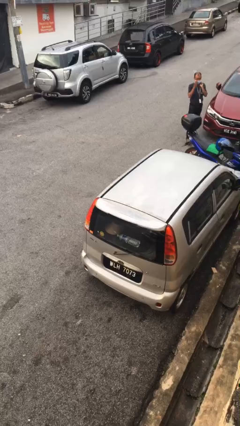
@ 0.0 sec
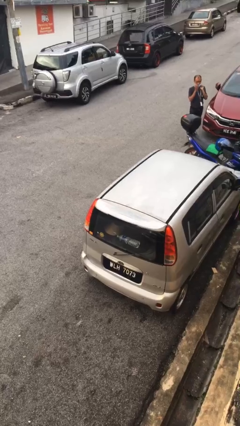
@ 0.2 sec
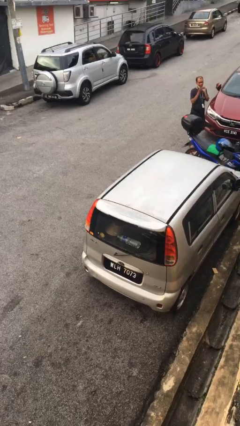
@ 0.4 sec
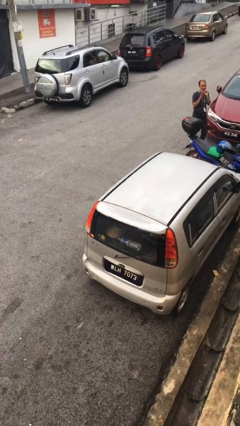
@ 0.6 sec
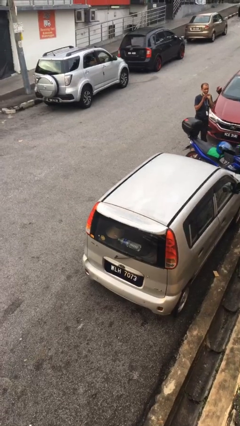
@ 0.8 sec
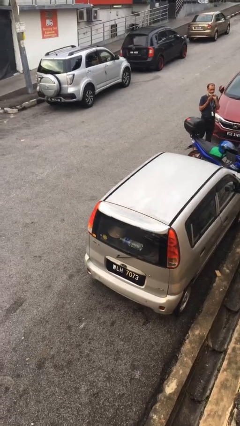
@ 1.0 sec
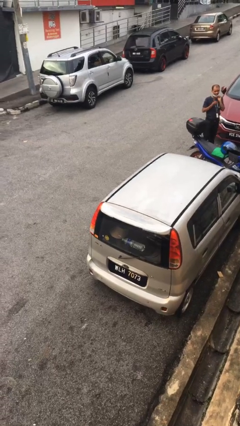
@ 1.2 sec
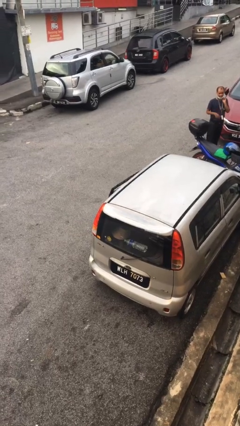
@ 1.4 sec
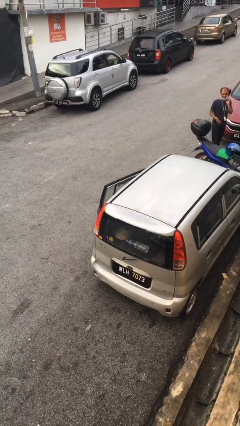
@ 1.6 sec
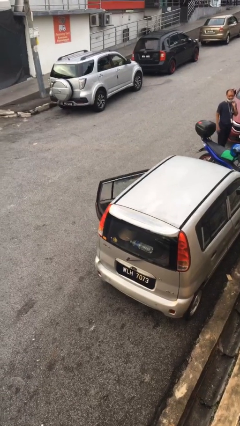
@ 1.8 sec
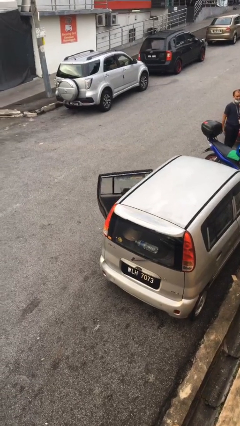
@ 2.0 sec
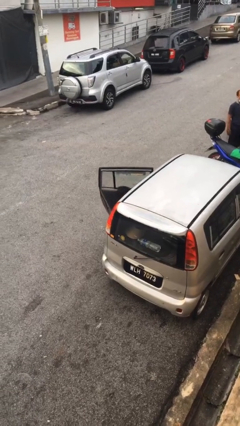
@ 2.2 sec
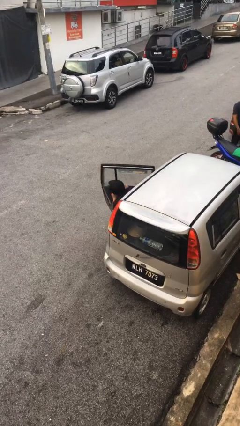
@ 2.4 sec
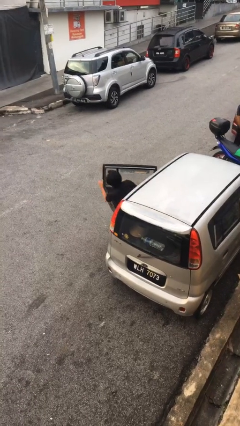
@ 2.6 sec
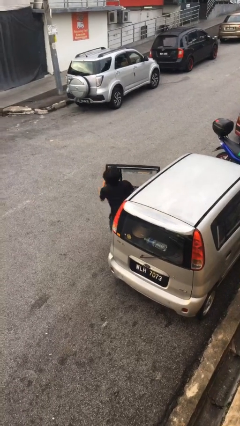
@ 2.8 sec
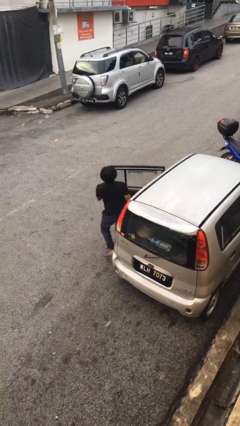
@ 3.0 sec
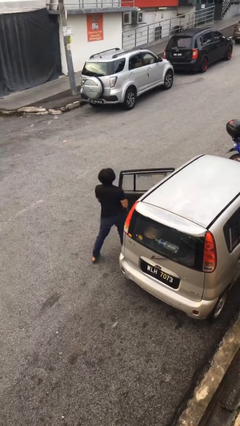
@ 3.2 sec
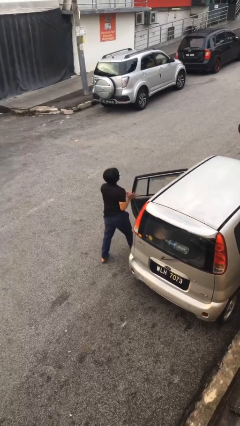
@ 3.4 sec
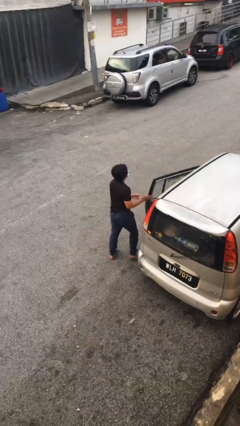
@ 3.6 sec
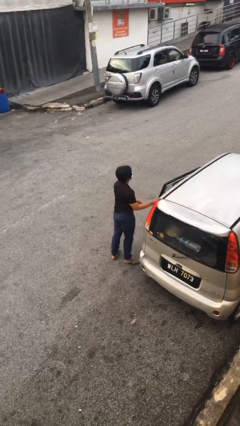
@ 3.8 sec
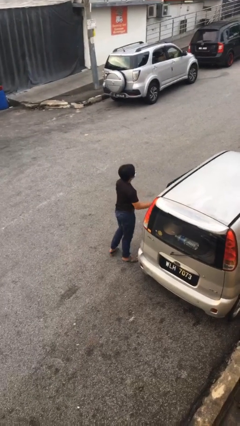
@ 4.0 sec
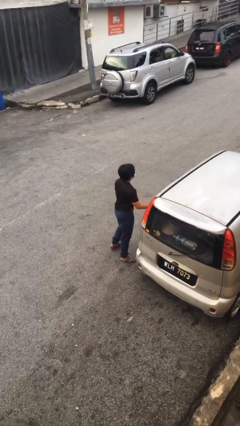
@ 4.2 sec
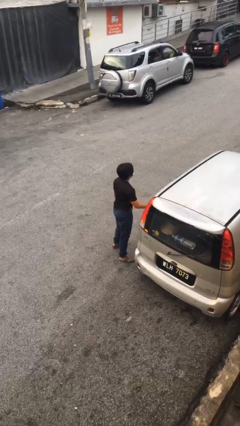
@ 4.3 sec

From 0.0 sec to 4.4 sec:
person exits car

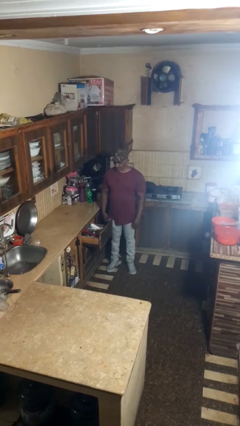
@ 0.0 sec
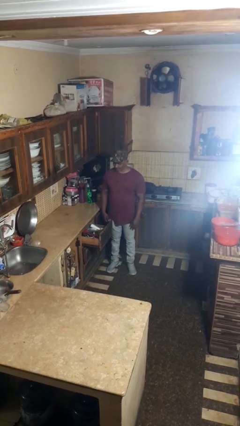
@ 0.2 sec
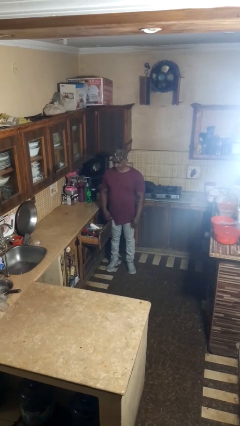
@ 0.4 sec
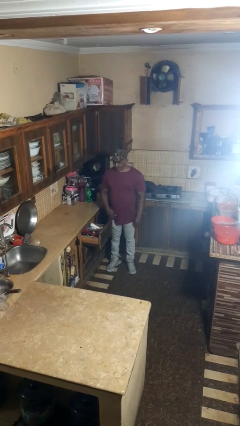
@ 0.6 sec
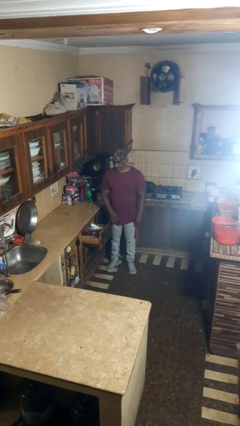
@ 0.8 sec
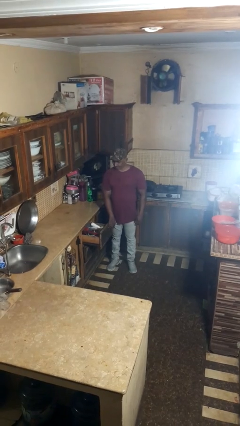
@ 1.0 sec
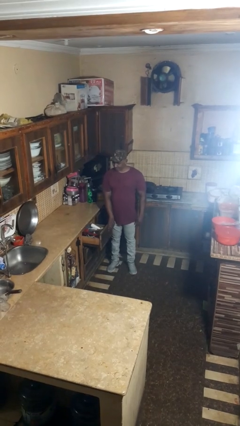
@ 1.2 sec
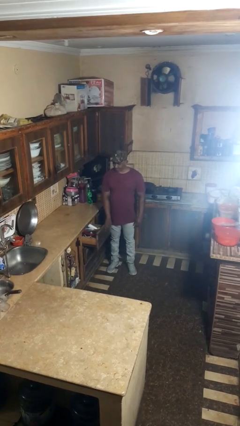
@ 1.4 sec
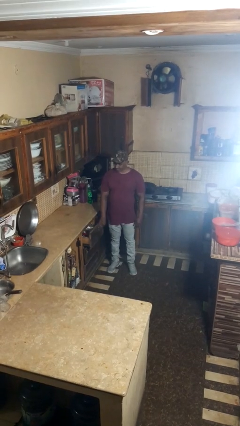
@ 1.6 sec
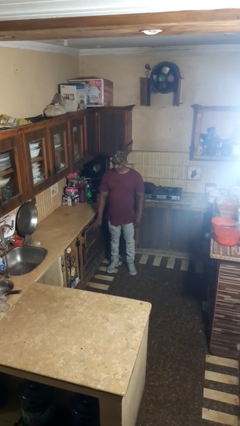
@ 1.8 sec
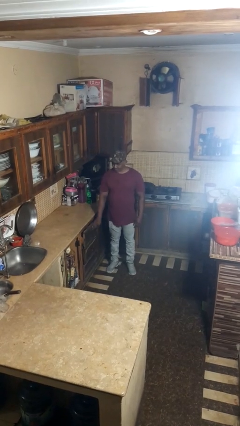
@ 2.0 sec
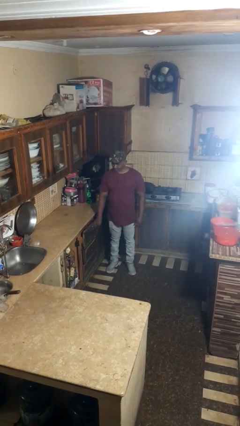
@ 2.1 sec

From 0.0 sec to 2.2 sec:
person closes kitchen drawer

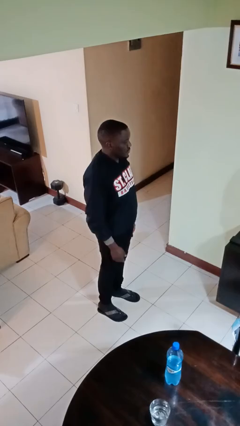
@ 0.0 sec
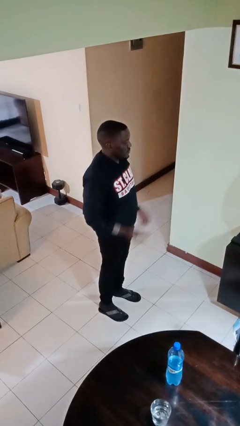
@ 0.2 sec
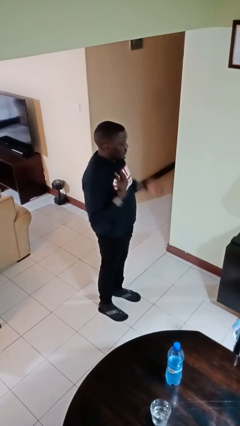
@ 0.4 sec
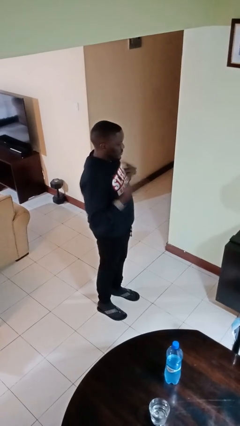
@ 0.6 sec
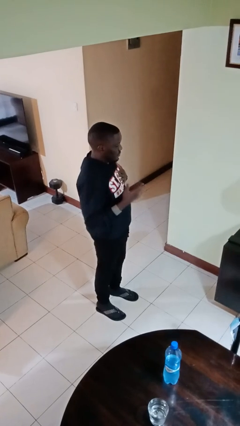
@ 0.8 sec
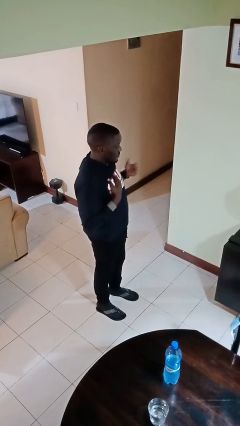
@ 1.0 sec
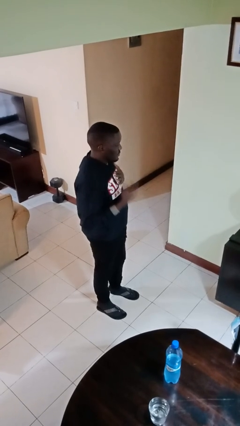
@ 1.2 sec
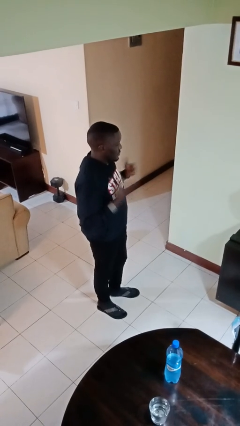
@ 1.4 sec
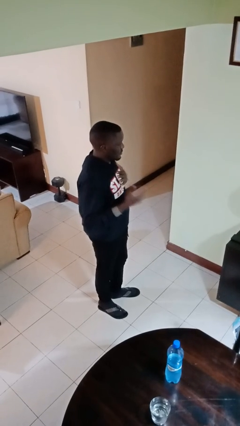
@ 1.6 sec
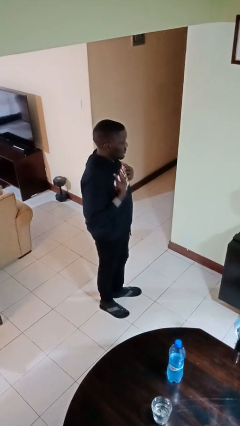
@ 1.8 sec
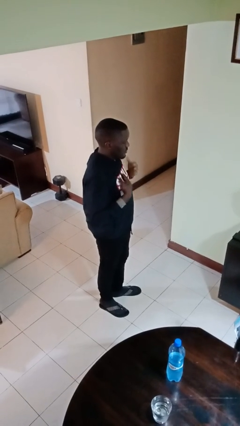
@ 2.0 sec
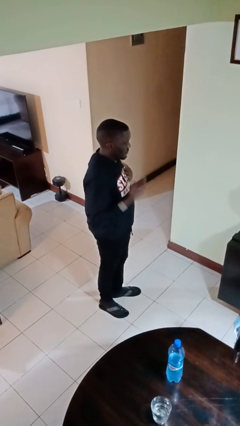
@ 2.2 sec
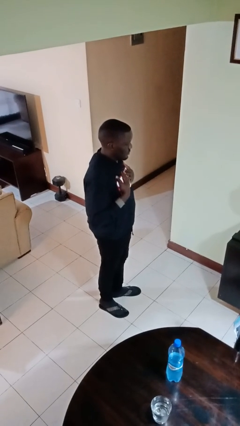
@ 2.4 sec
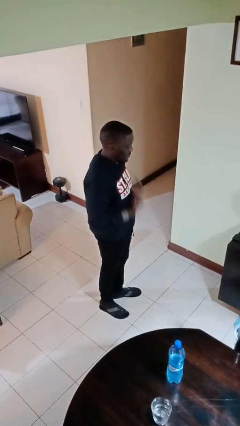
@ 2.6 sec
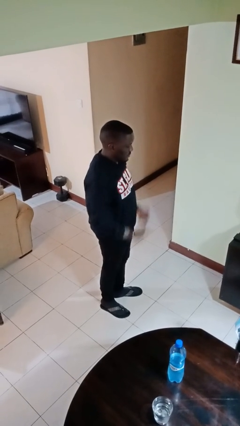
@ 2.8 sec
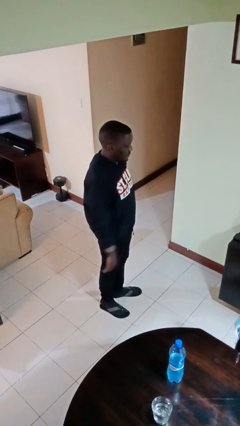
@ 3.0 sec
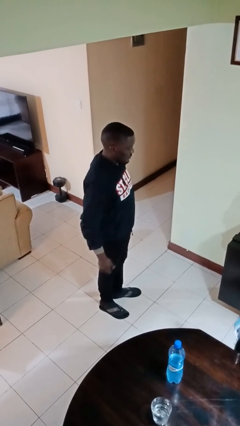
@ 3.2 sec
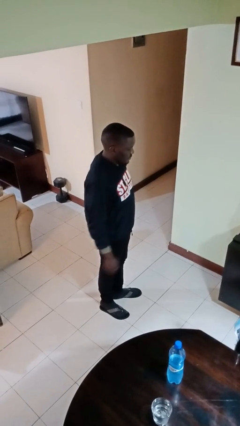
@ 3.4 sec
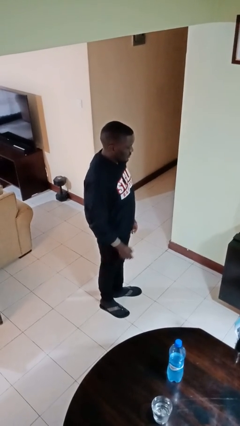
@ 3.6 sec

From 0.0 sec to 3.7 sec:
person drums on chest

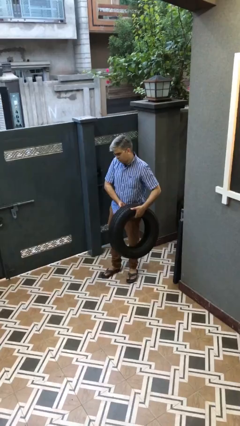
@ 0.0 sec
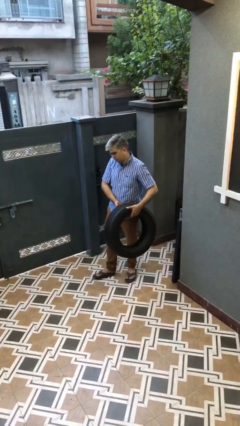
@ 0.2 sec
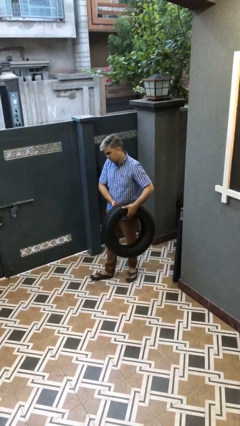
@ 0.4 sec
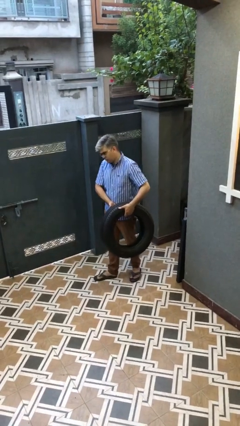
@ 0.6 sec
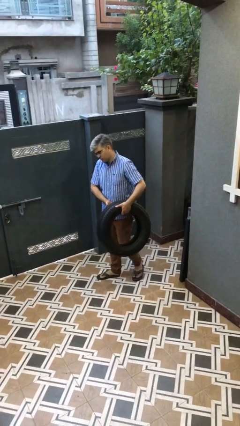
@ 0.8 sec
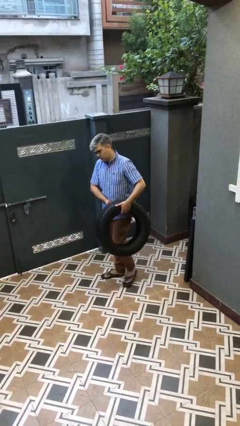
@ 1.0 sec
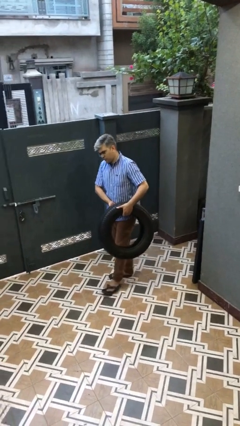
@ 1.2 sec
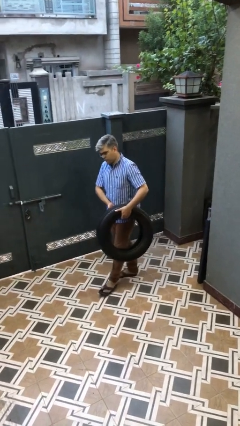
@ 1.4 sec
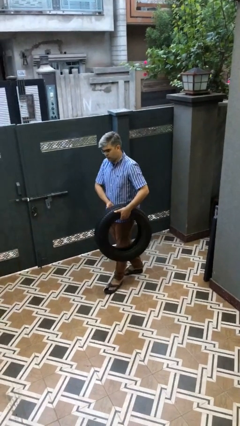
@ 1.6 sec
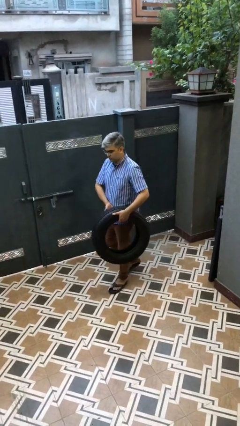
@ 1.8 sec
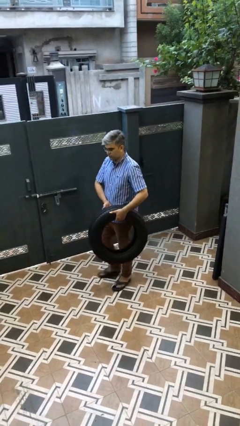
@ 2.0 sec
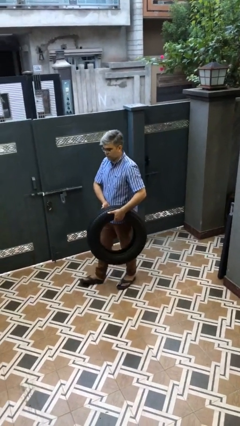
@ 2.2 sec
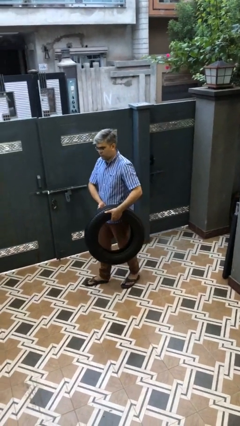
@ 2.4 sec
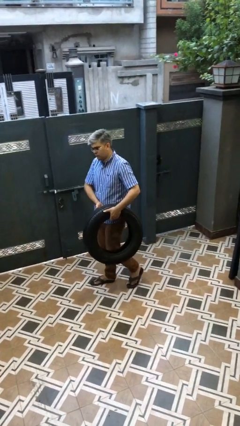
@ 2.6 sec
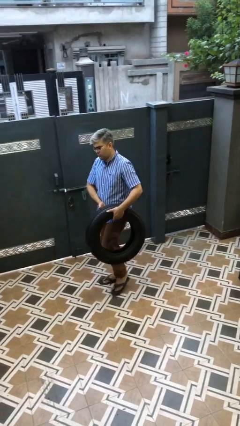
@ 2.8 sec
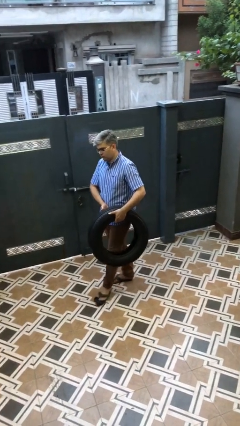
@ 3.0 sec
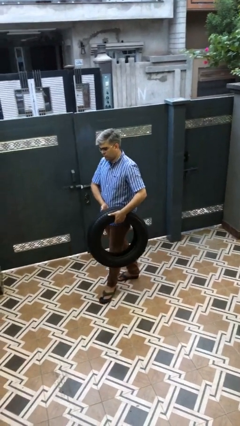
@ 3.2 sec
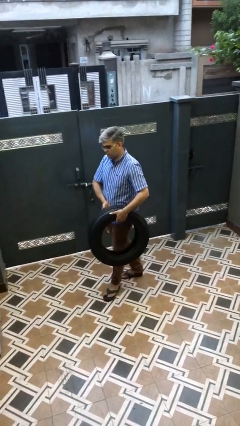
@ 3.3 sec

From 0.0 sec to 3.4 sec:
person carries heavy object

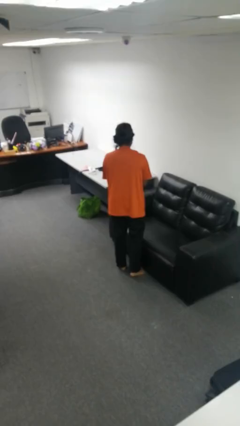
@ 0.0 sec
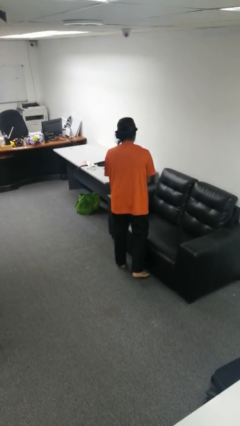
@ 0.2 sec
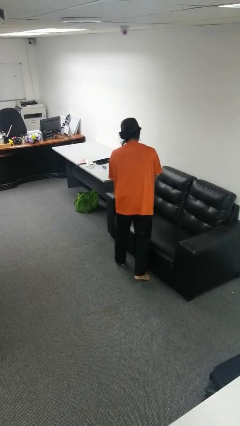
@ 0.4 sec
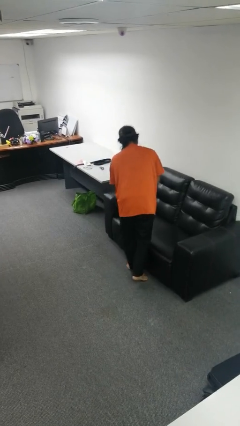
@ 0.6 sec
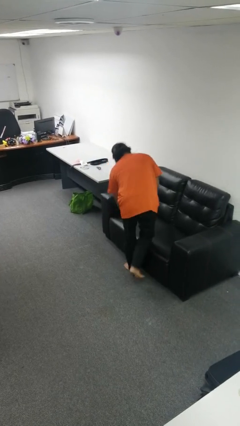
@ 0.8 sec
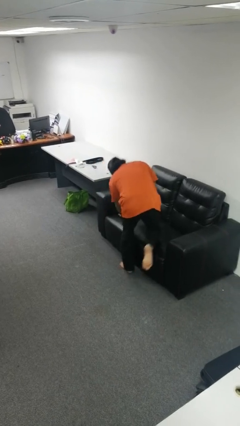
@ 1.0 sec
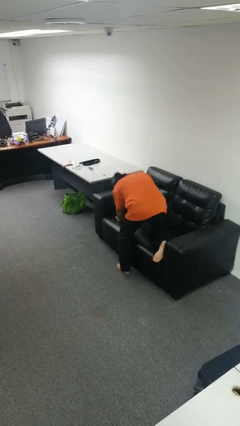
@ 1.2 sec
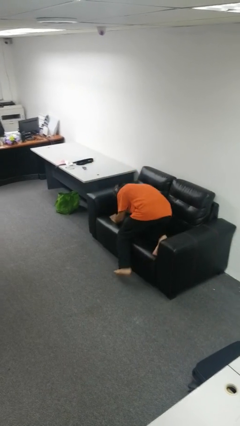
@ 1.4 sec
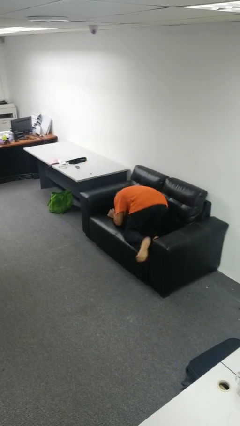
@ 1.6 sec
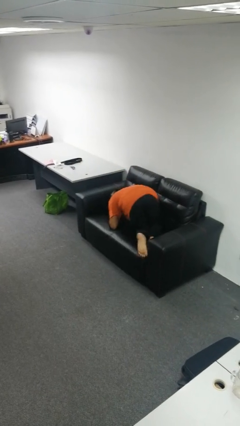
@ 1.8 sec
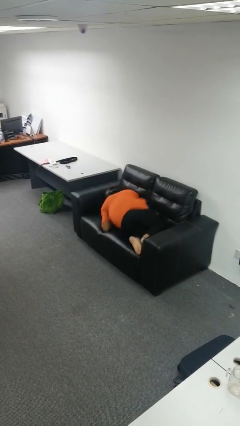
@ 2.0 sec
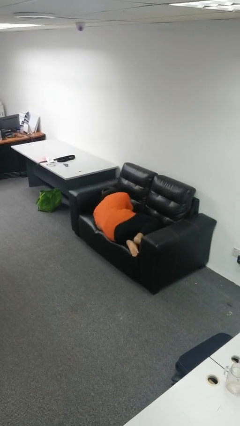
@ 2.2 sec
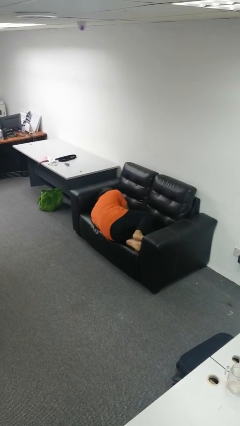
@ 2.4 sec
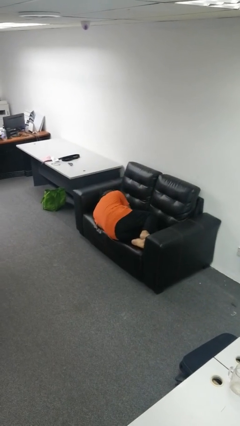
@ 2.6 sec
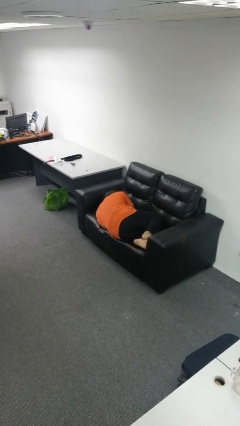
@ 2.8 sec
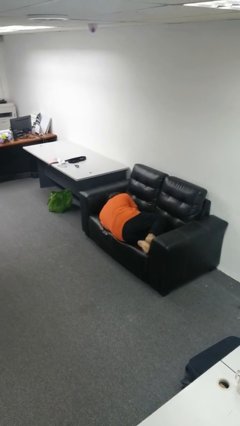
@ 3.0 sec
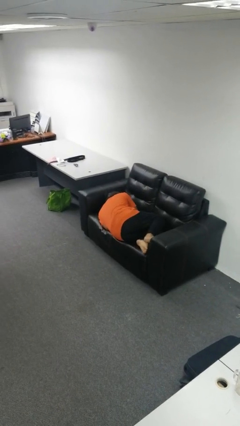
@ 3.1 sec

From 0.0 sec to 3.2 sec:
person lies down on couch

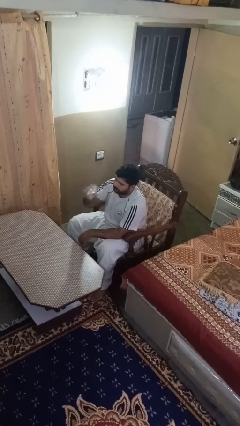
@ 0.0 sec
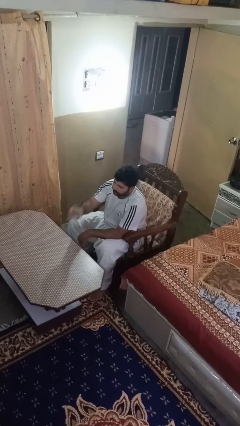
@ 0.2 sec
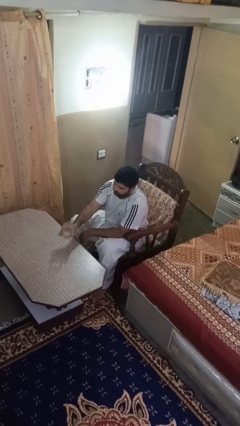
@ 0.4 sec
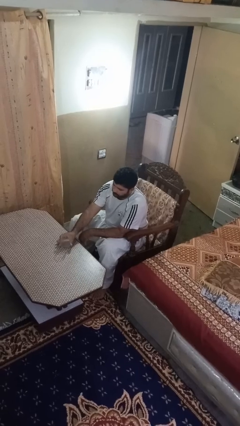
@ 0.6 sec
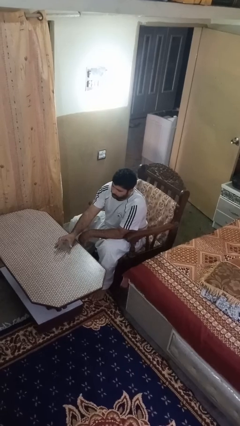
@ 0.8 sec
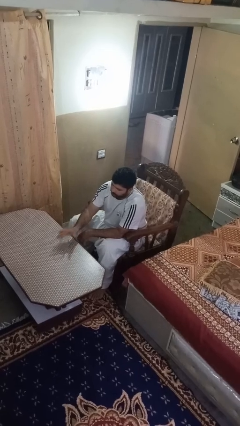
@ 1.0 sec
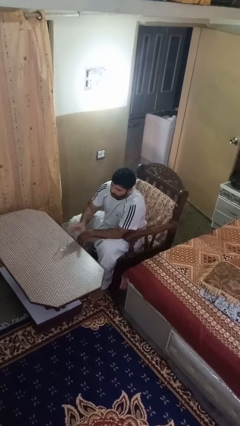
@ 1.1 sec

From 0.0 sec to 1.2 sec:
person puts down object on table
